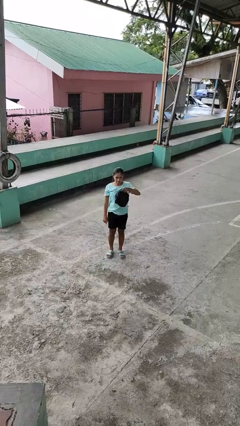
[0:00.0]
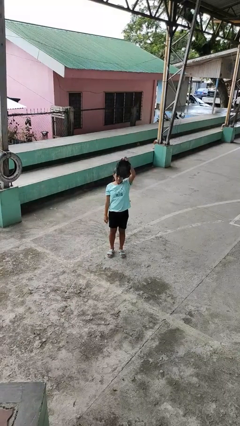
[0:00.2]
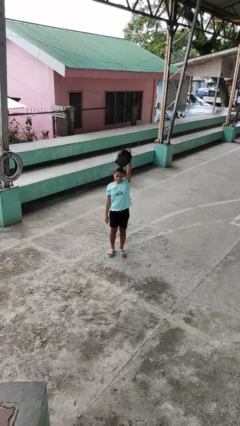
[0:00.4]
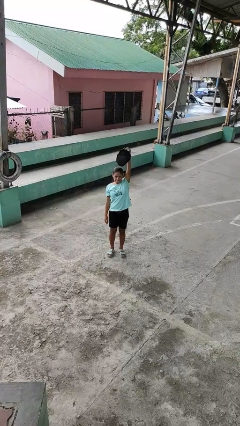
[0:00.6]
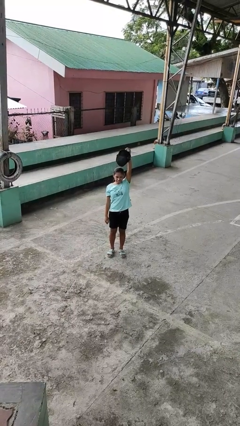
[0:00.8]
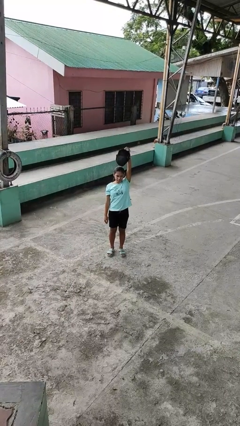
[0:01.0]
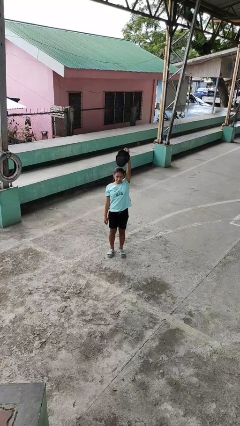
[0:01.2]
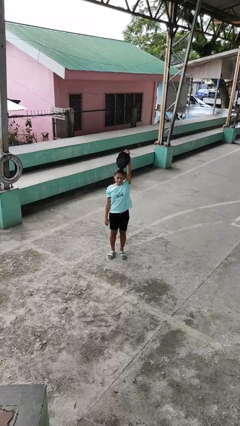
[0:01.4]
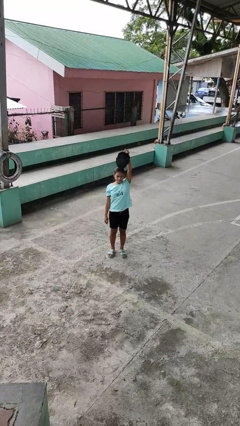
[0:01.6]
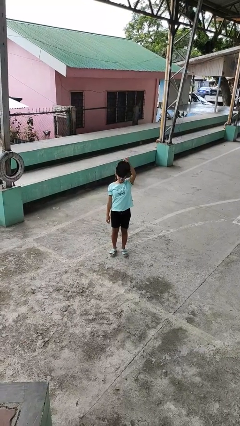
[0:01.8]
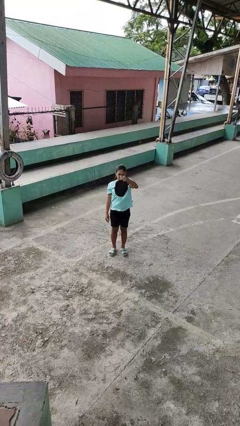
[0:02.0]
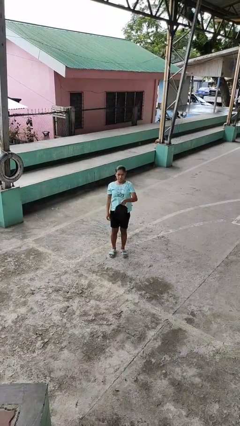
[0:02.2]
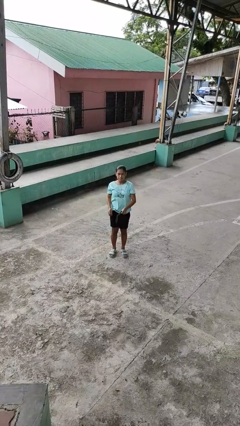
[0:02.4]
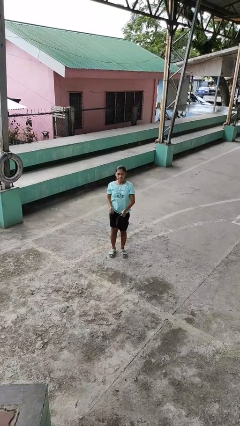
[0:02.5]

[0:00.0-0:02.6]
person holds object above head

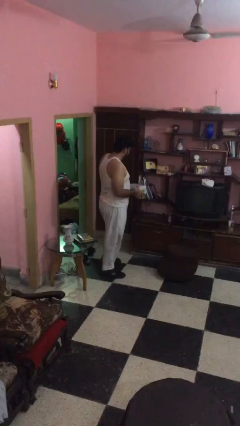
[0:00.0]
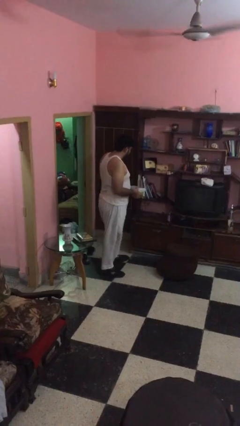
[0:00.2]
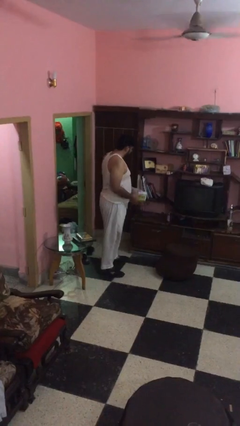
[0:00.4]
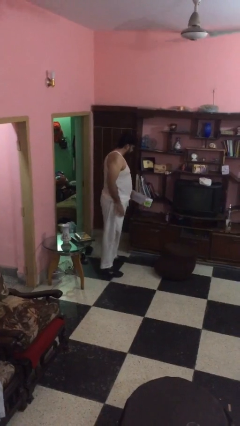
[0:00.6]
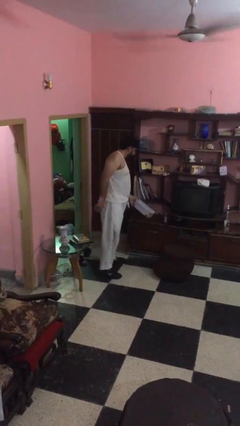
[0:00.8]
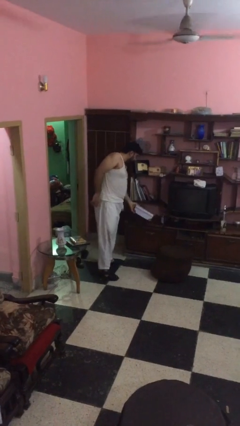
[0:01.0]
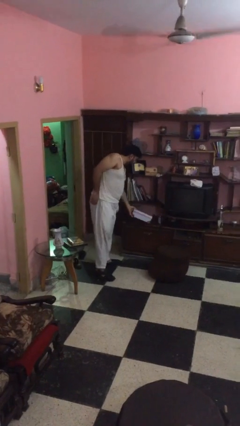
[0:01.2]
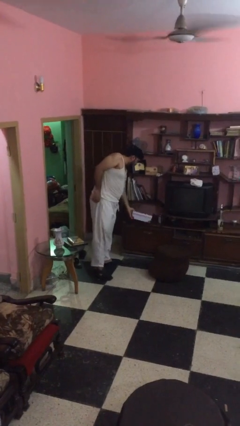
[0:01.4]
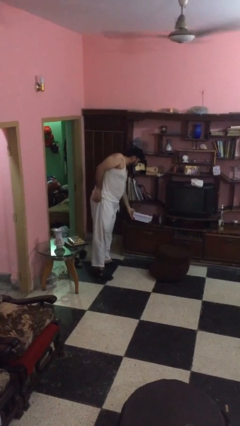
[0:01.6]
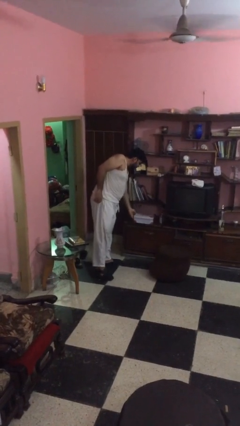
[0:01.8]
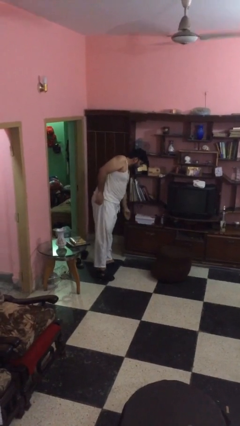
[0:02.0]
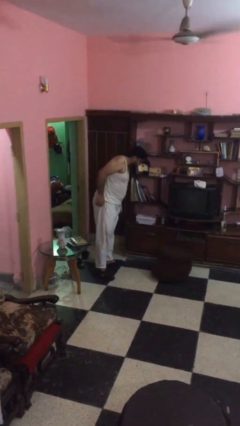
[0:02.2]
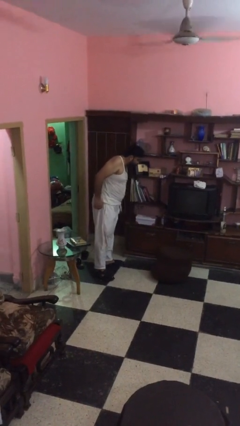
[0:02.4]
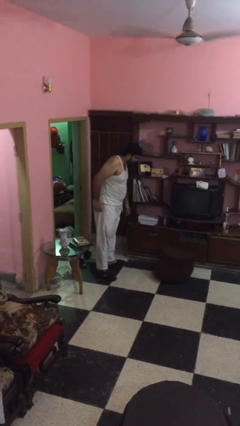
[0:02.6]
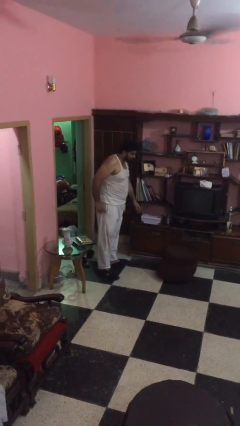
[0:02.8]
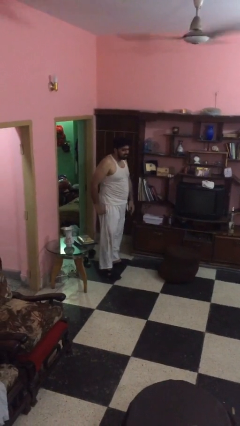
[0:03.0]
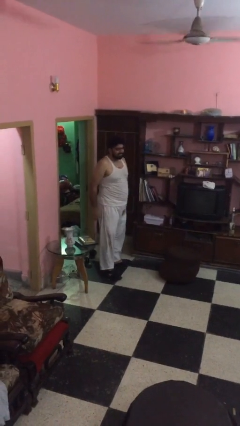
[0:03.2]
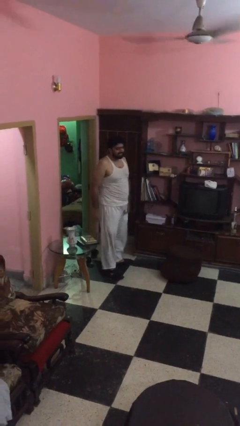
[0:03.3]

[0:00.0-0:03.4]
person puts down object on table

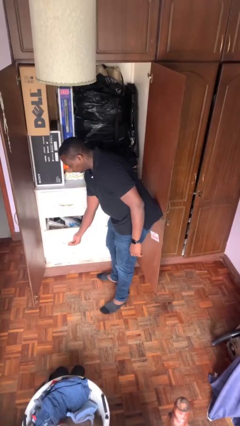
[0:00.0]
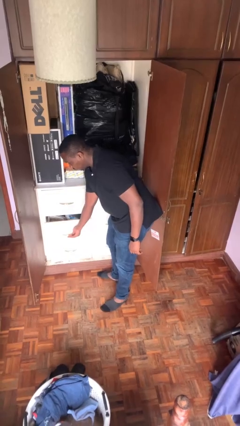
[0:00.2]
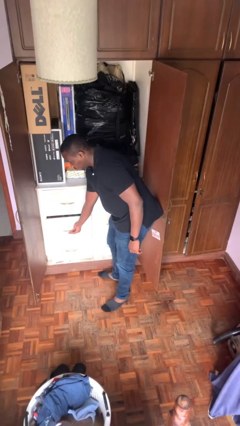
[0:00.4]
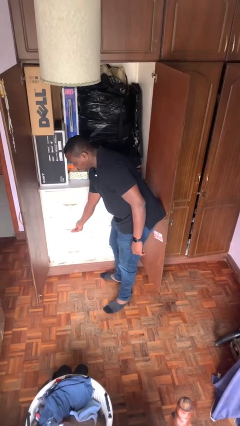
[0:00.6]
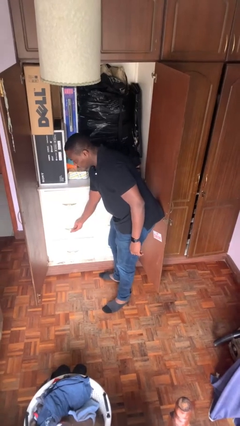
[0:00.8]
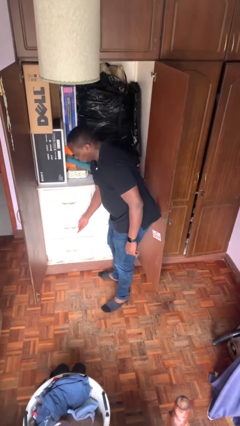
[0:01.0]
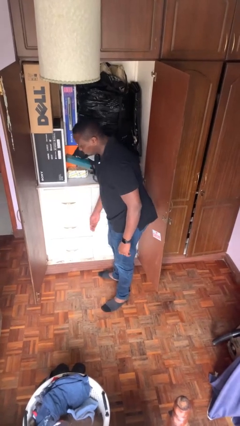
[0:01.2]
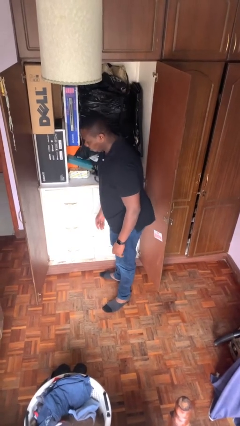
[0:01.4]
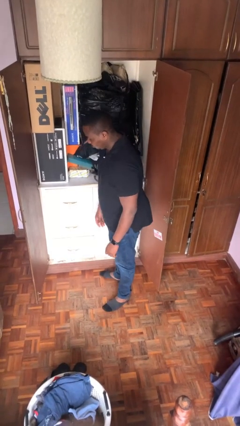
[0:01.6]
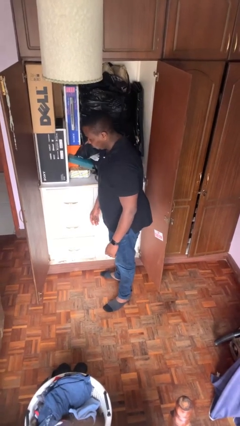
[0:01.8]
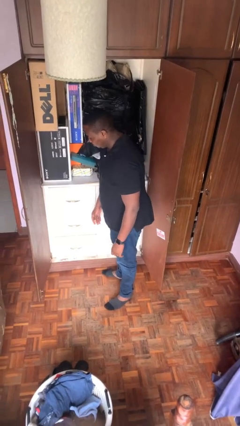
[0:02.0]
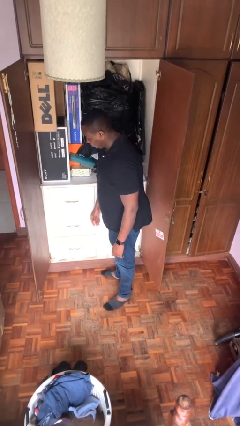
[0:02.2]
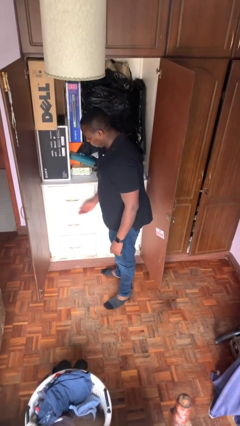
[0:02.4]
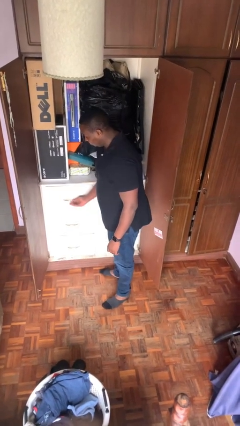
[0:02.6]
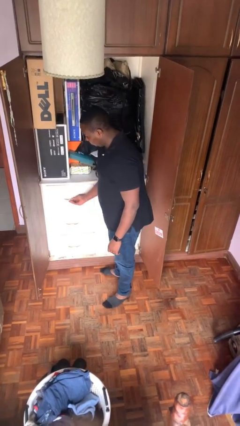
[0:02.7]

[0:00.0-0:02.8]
person closes dresser drawer

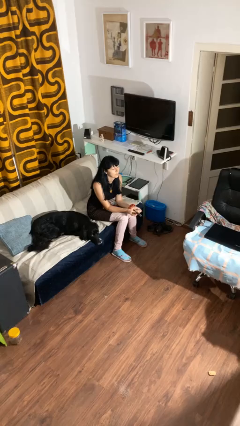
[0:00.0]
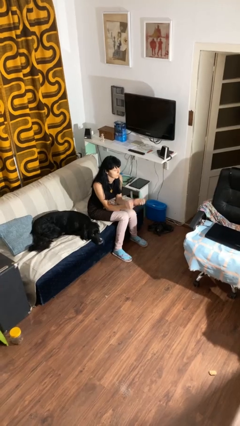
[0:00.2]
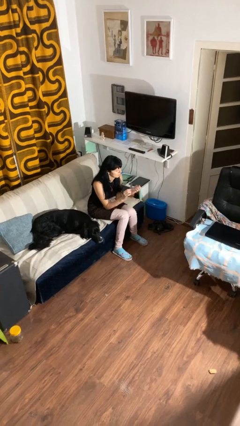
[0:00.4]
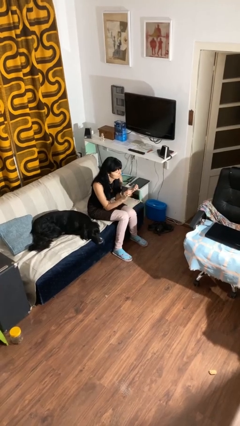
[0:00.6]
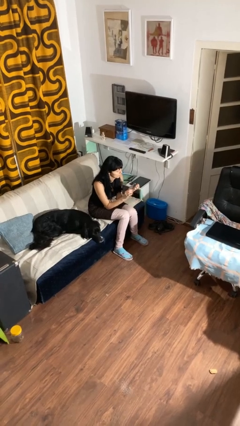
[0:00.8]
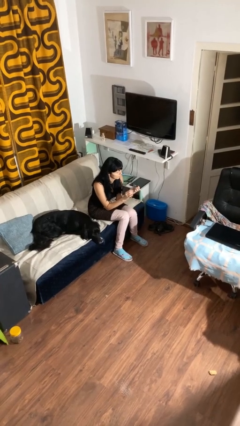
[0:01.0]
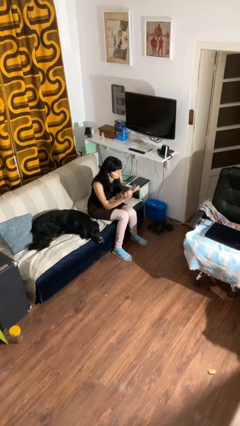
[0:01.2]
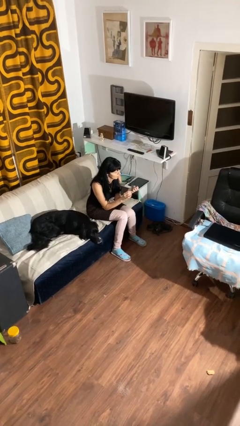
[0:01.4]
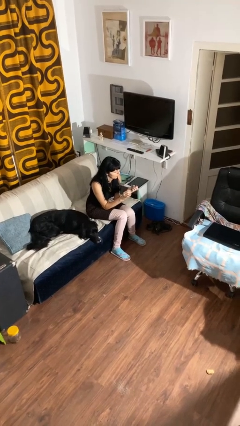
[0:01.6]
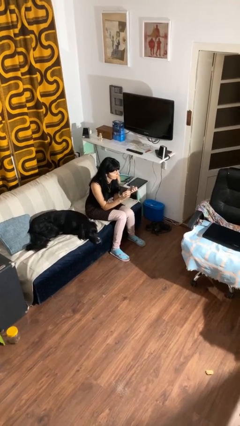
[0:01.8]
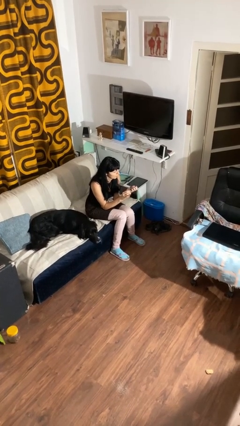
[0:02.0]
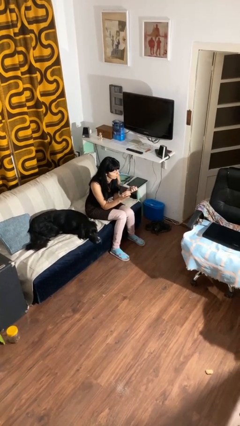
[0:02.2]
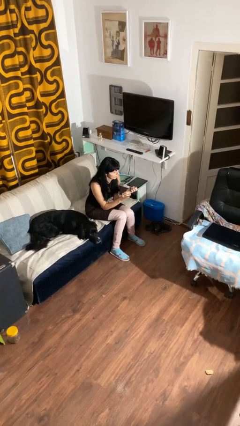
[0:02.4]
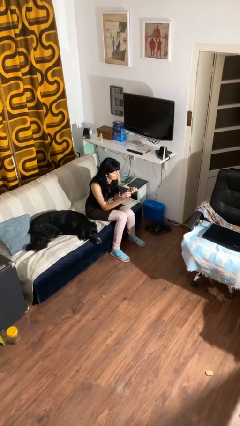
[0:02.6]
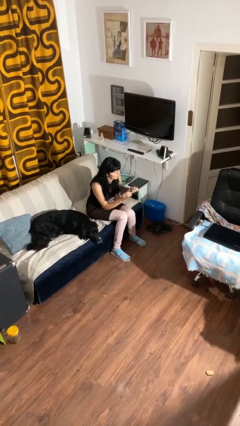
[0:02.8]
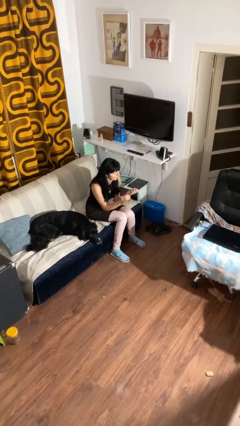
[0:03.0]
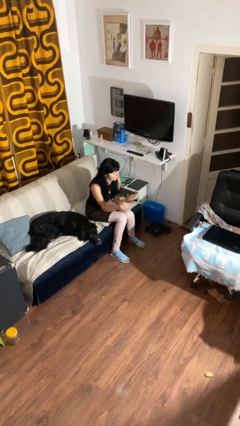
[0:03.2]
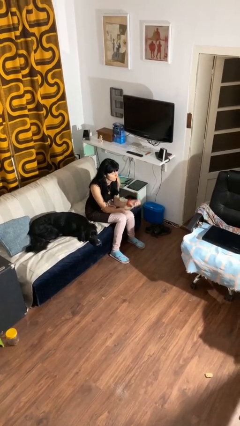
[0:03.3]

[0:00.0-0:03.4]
person files fingernails

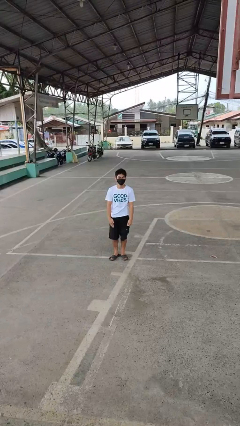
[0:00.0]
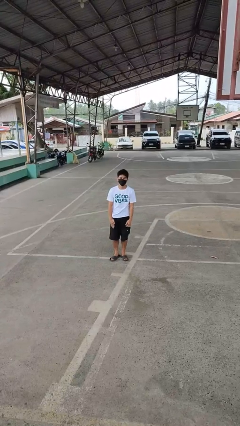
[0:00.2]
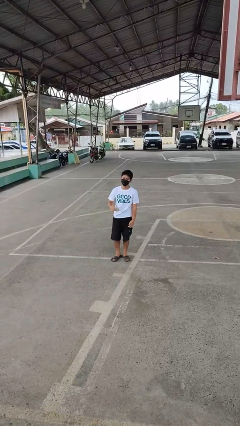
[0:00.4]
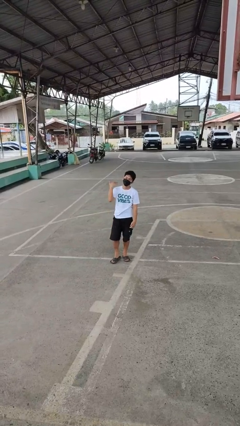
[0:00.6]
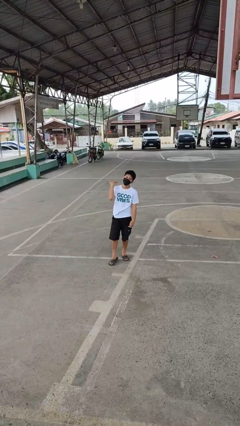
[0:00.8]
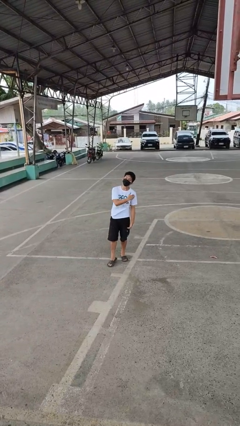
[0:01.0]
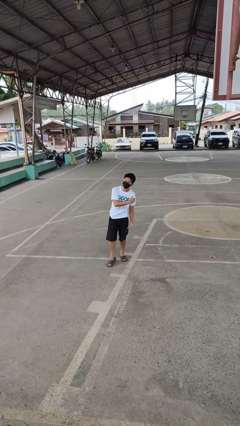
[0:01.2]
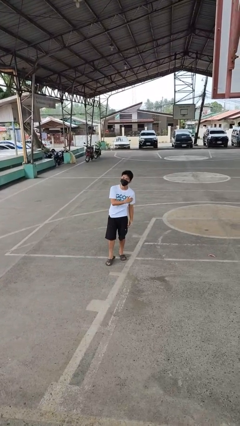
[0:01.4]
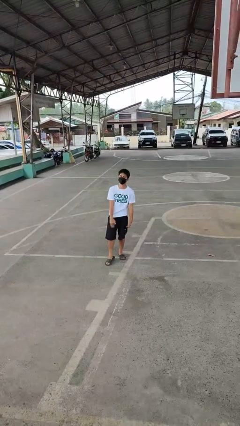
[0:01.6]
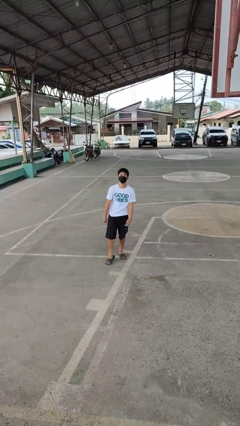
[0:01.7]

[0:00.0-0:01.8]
person gestures cut

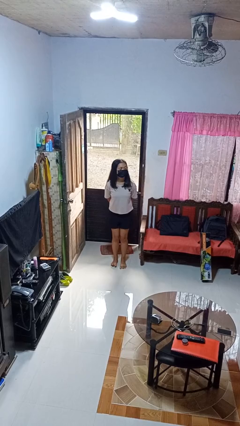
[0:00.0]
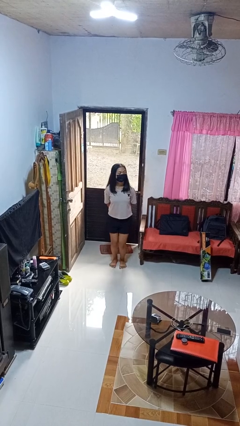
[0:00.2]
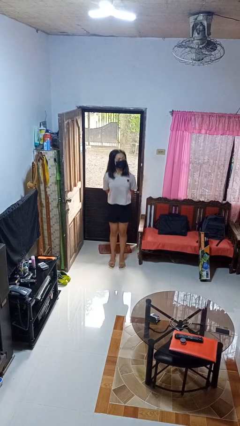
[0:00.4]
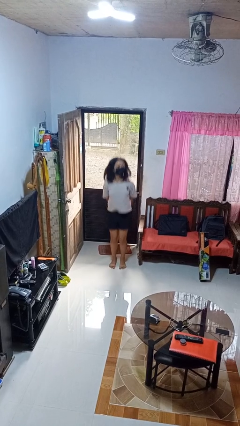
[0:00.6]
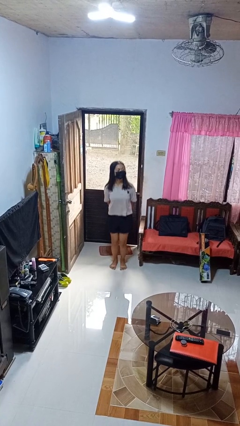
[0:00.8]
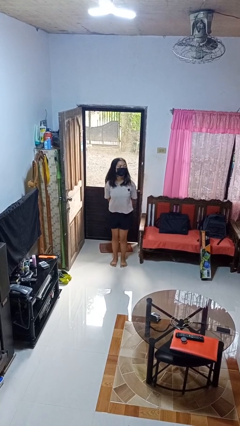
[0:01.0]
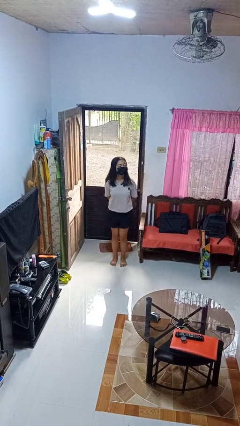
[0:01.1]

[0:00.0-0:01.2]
person jumps

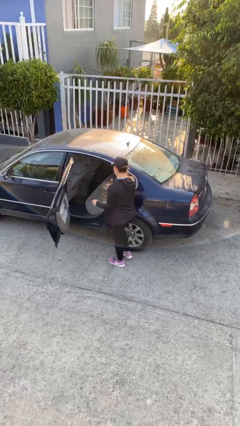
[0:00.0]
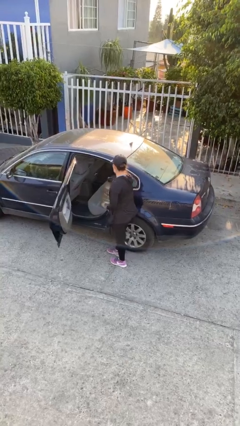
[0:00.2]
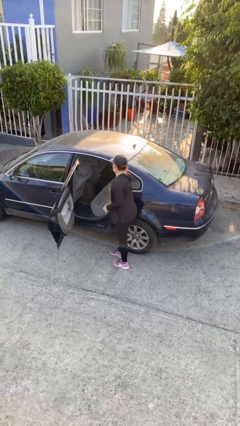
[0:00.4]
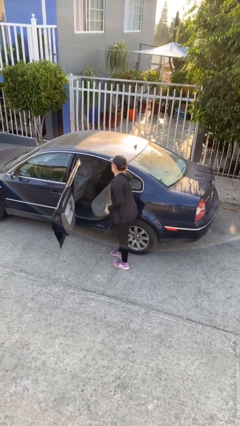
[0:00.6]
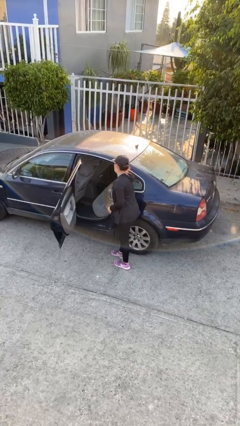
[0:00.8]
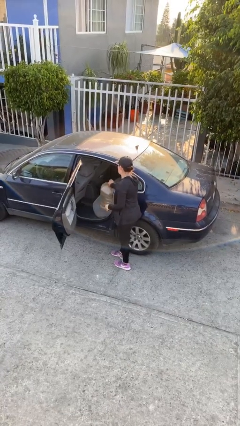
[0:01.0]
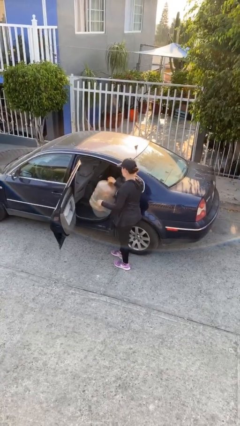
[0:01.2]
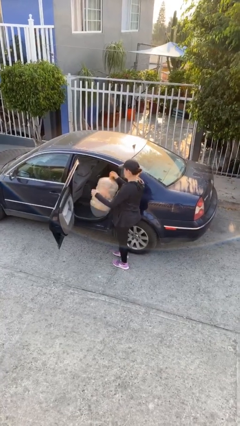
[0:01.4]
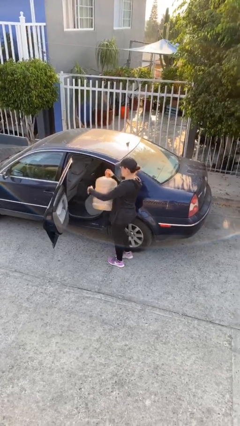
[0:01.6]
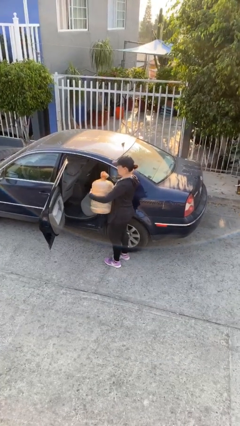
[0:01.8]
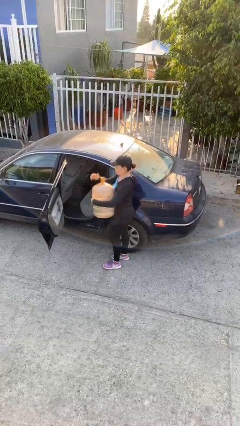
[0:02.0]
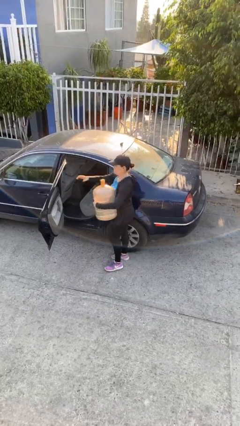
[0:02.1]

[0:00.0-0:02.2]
person unloads car
